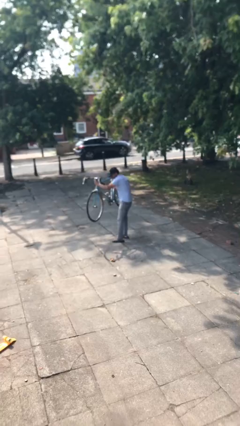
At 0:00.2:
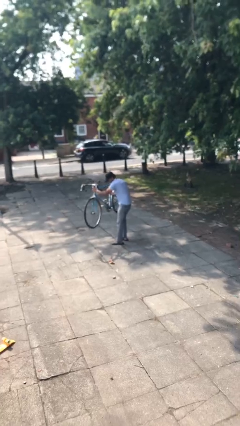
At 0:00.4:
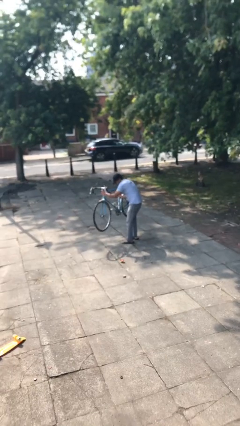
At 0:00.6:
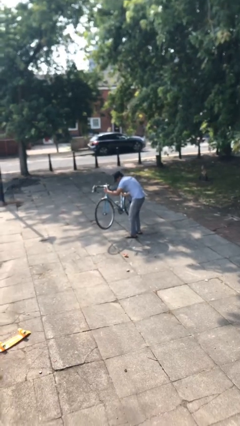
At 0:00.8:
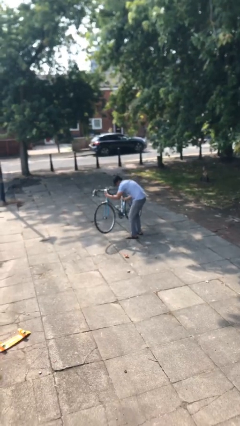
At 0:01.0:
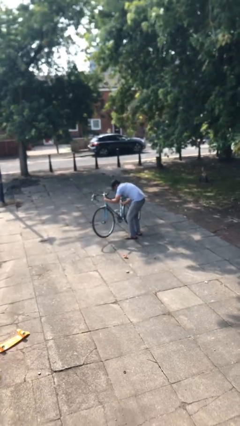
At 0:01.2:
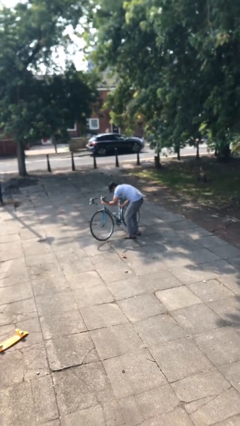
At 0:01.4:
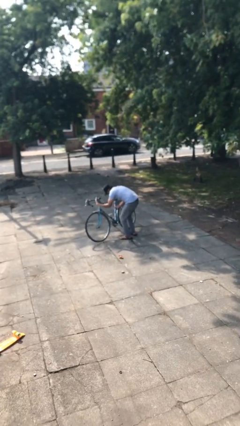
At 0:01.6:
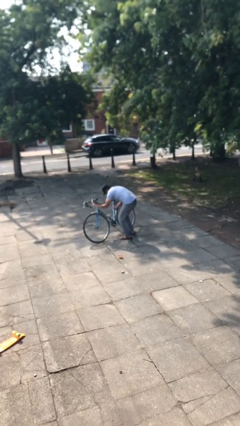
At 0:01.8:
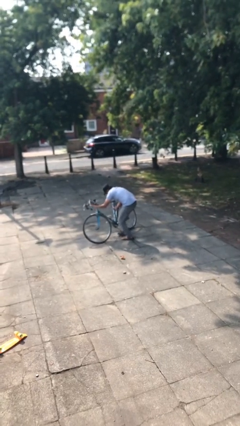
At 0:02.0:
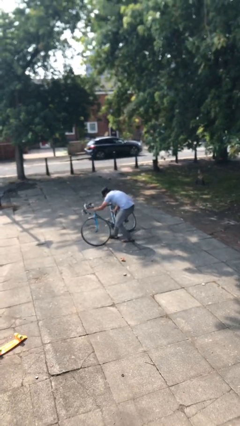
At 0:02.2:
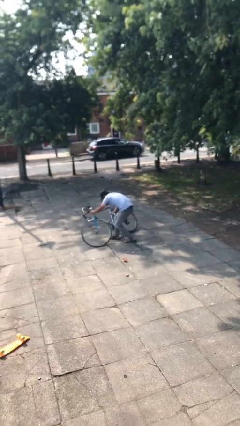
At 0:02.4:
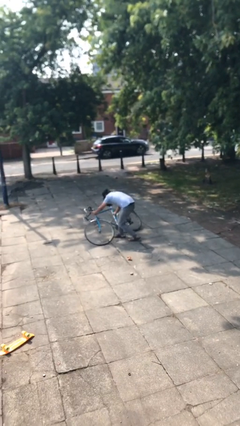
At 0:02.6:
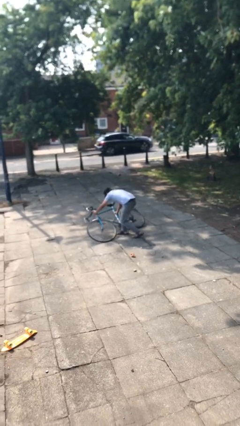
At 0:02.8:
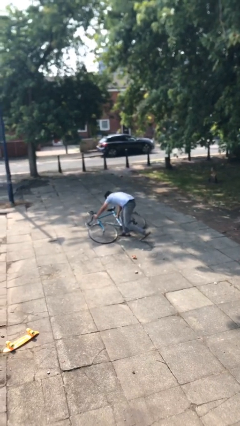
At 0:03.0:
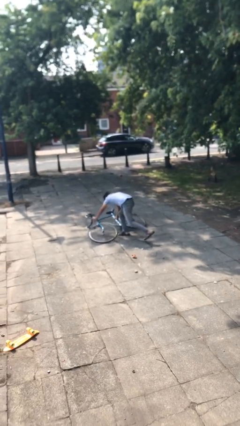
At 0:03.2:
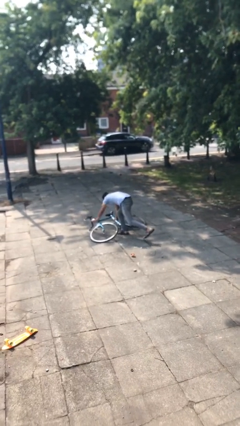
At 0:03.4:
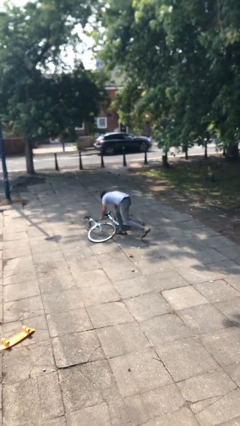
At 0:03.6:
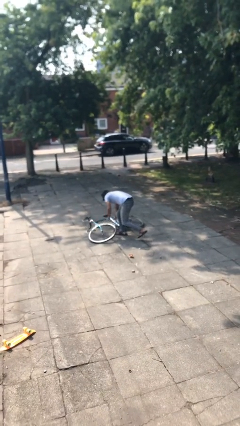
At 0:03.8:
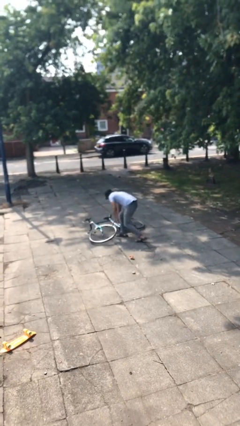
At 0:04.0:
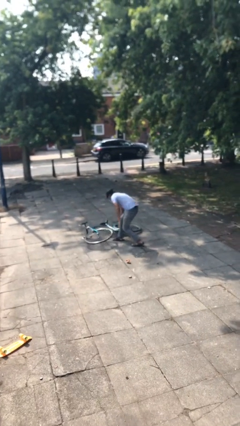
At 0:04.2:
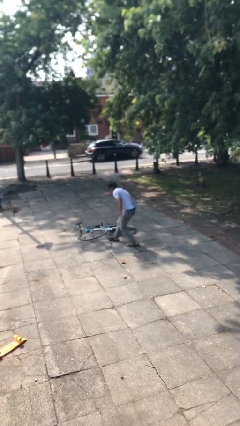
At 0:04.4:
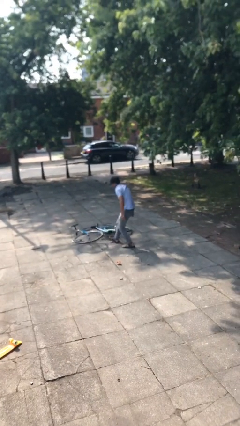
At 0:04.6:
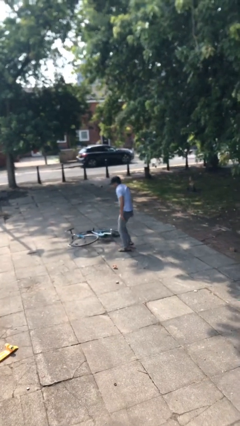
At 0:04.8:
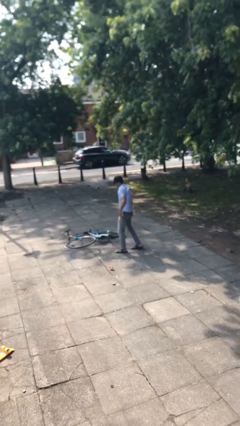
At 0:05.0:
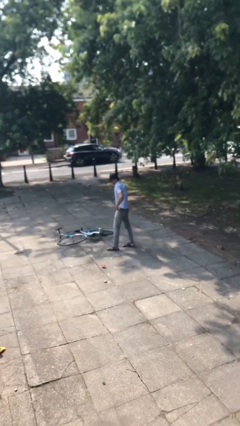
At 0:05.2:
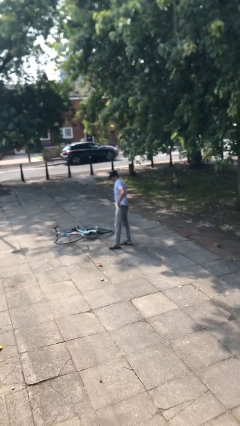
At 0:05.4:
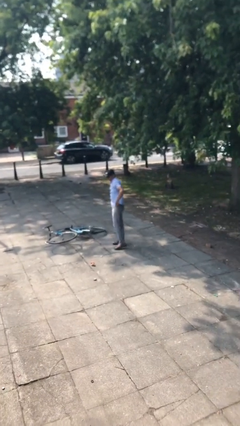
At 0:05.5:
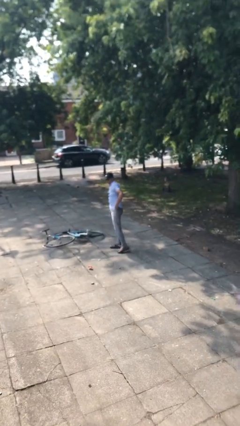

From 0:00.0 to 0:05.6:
person puts down object on floor

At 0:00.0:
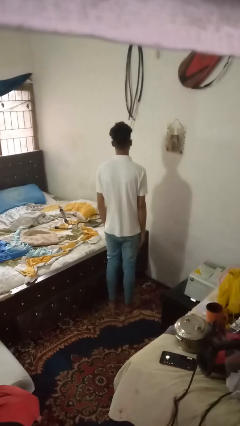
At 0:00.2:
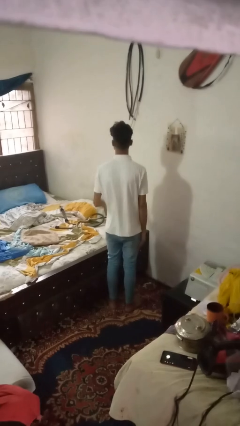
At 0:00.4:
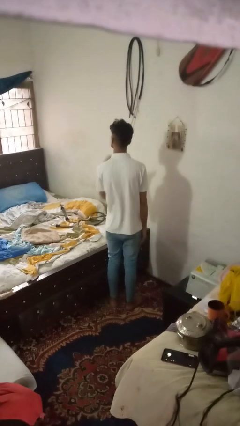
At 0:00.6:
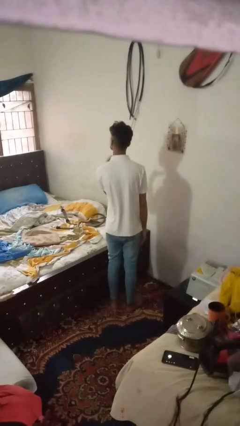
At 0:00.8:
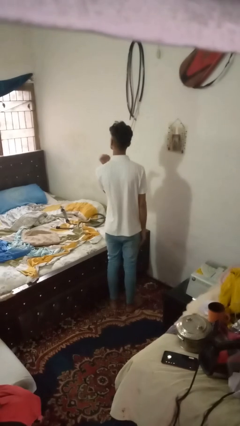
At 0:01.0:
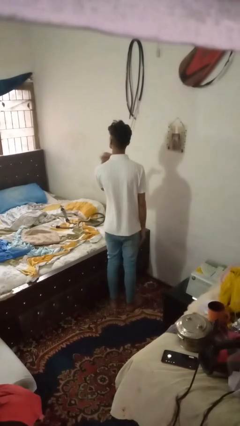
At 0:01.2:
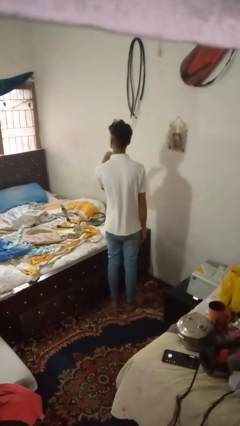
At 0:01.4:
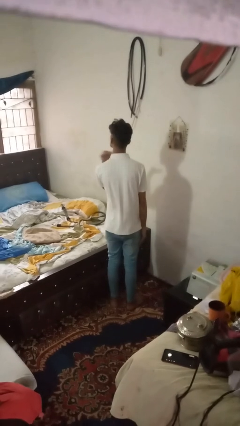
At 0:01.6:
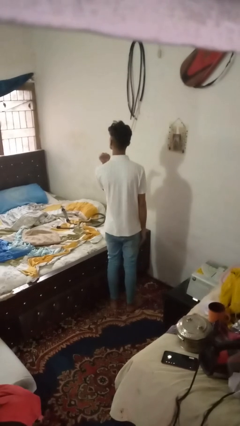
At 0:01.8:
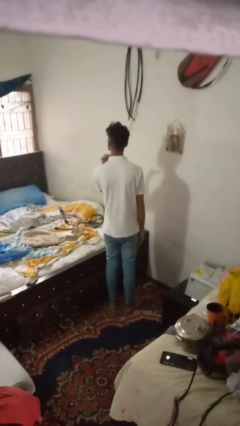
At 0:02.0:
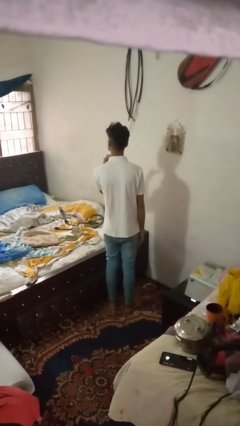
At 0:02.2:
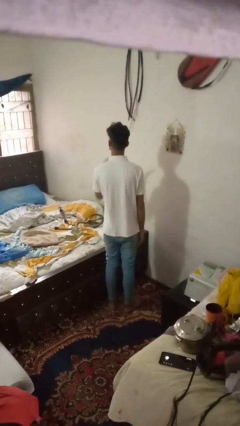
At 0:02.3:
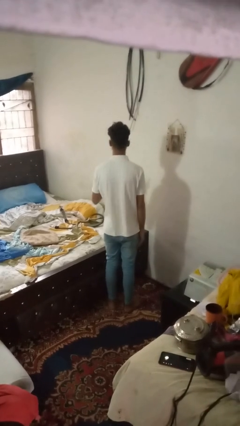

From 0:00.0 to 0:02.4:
person gestures cut

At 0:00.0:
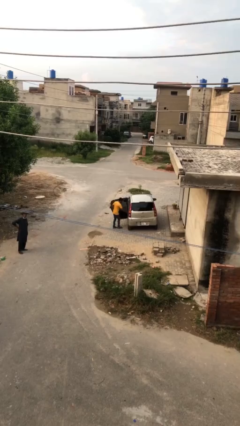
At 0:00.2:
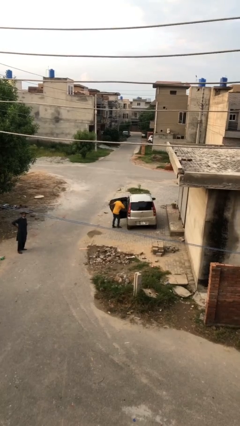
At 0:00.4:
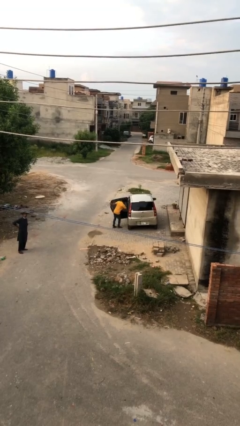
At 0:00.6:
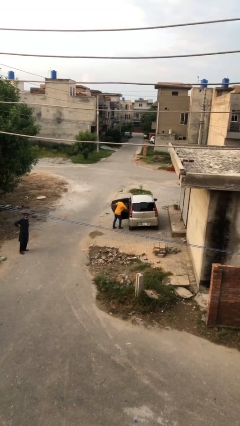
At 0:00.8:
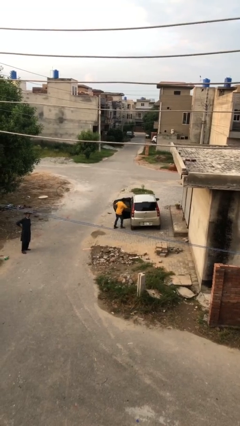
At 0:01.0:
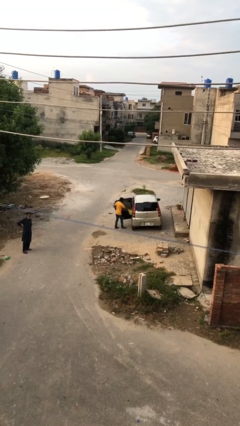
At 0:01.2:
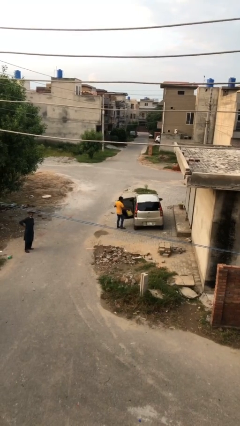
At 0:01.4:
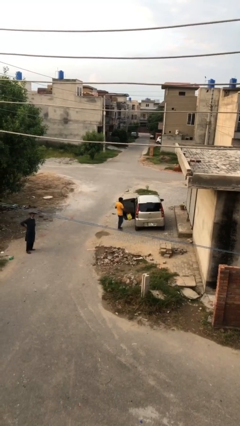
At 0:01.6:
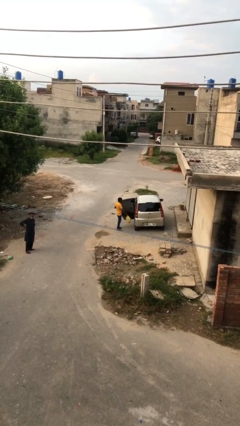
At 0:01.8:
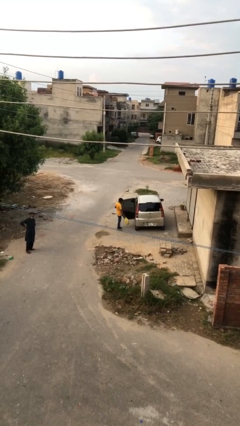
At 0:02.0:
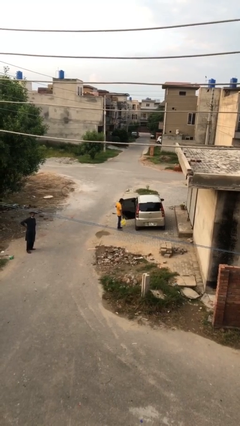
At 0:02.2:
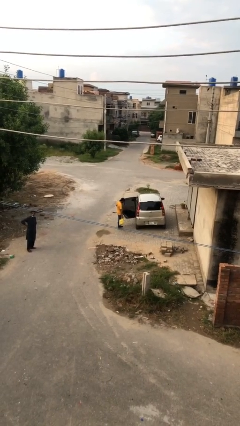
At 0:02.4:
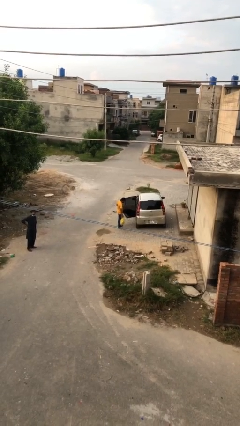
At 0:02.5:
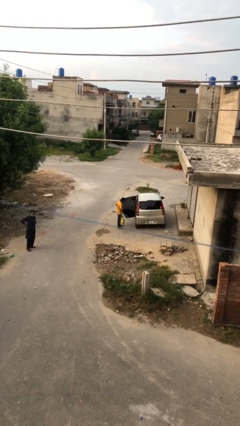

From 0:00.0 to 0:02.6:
person unloads car

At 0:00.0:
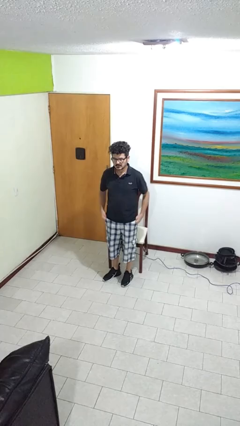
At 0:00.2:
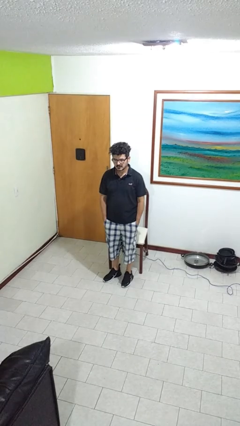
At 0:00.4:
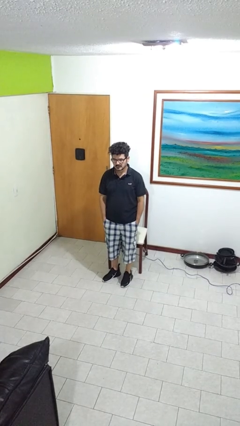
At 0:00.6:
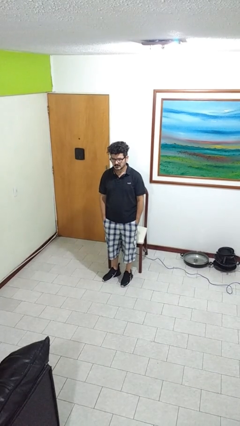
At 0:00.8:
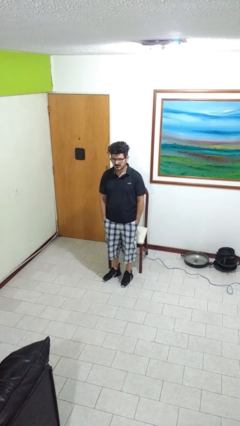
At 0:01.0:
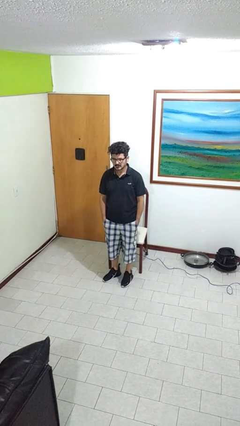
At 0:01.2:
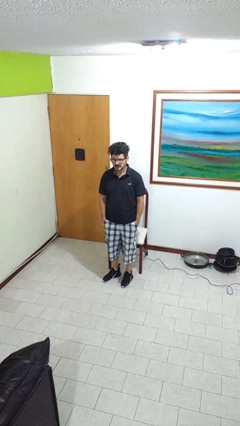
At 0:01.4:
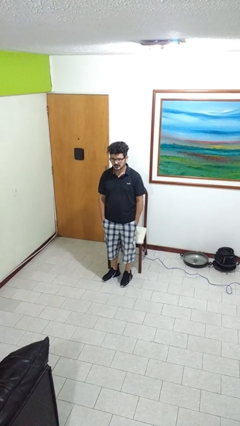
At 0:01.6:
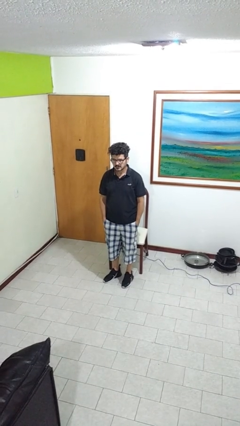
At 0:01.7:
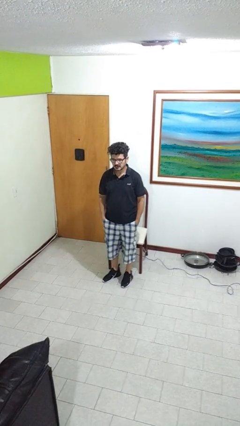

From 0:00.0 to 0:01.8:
person puts hands in back pockets

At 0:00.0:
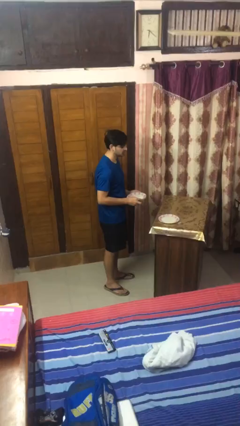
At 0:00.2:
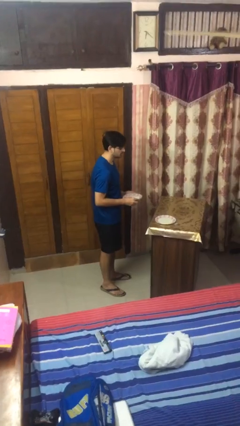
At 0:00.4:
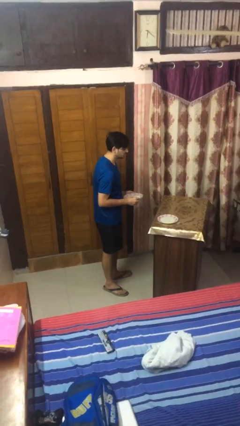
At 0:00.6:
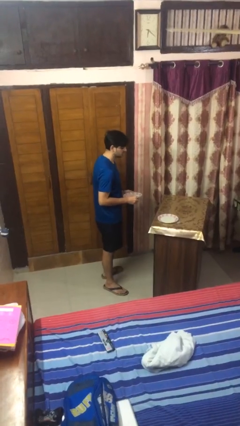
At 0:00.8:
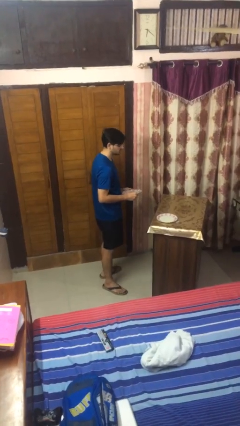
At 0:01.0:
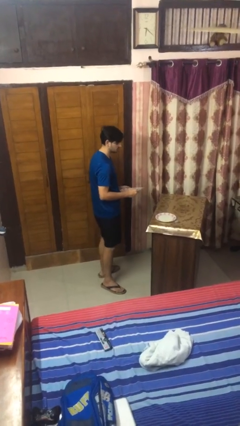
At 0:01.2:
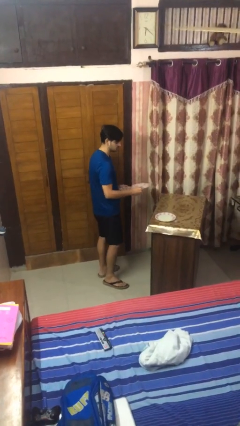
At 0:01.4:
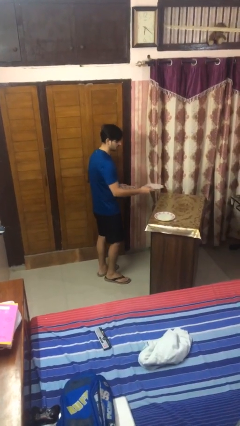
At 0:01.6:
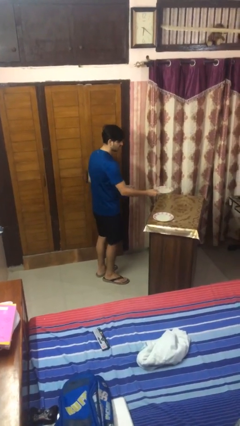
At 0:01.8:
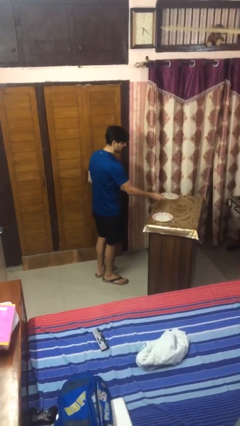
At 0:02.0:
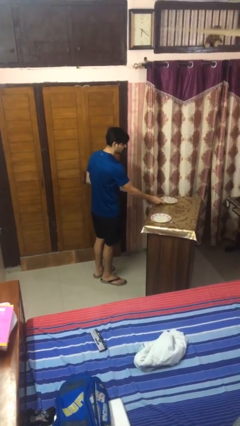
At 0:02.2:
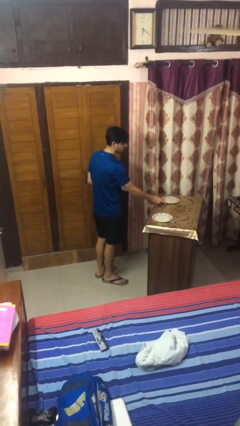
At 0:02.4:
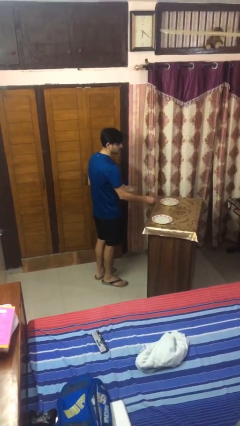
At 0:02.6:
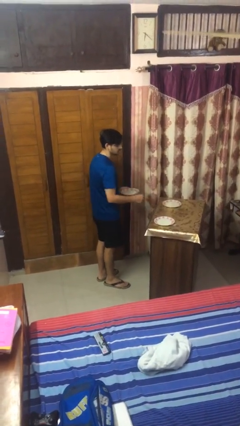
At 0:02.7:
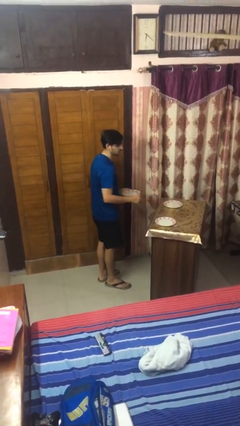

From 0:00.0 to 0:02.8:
person sets table

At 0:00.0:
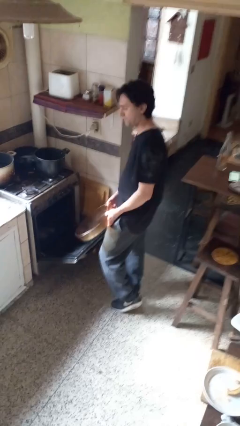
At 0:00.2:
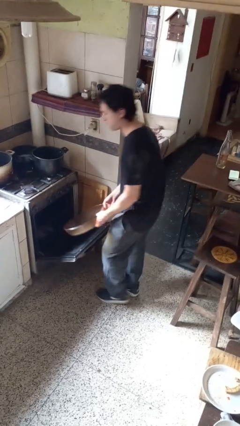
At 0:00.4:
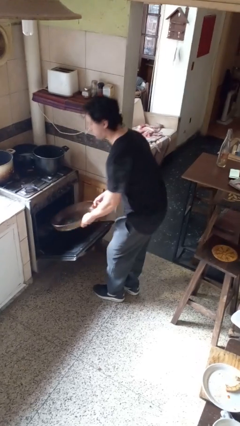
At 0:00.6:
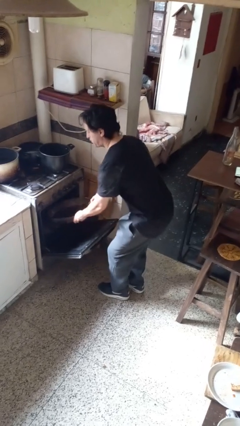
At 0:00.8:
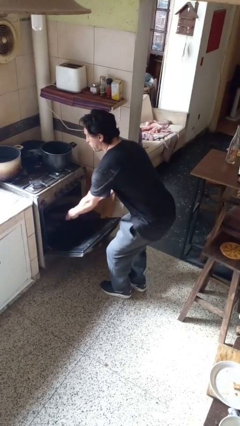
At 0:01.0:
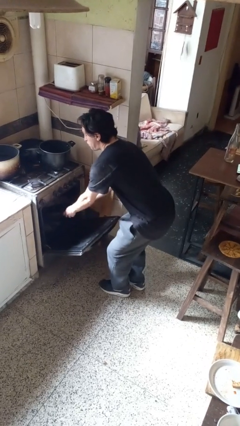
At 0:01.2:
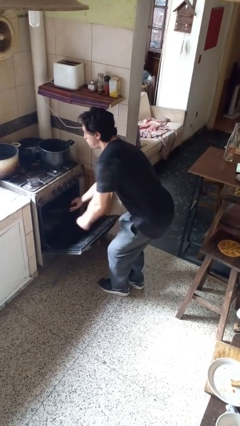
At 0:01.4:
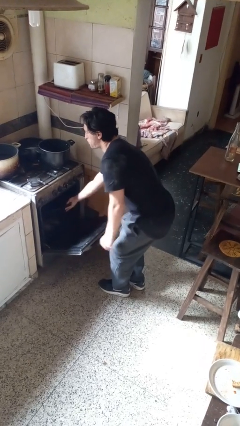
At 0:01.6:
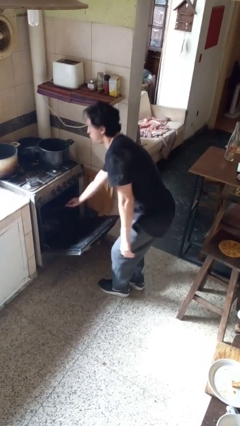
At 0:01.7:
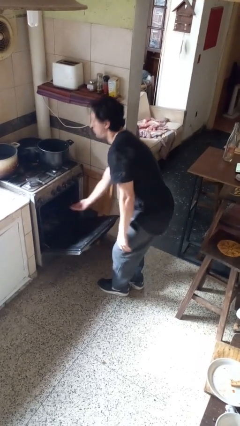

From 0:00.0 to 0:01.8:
person puts object into oven
